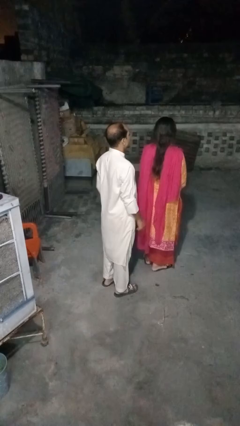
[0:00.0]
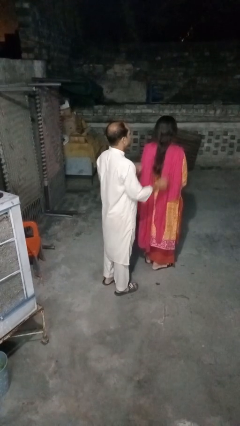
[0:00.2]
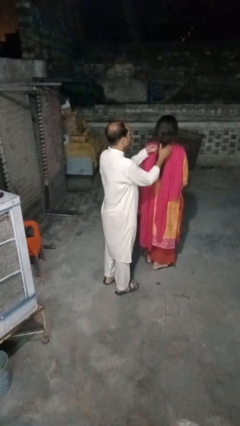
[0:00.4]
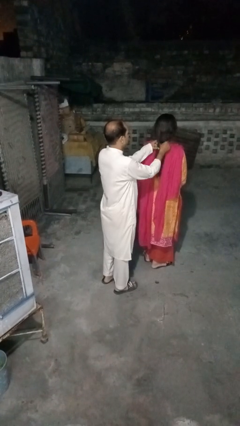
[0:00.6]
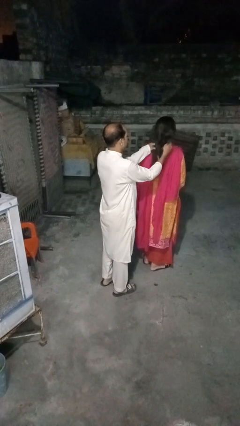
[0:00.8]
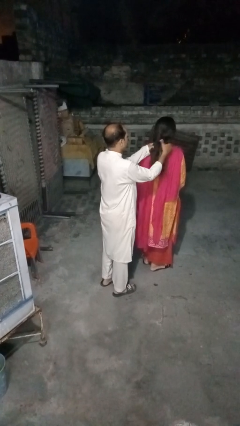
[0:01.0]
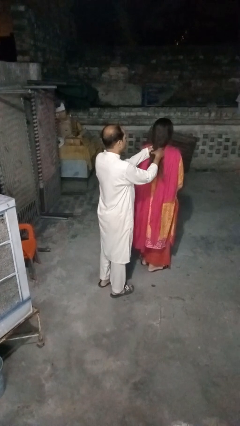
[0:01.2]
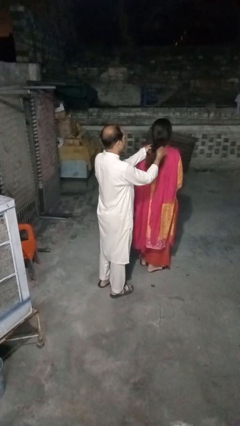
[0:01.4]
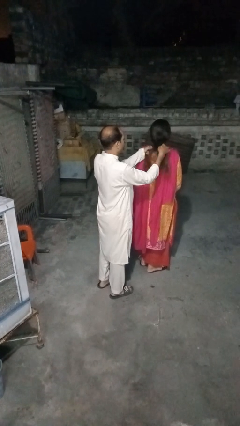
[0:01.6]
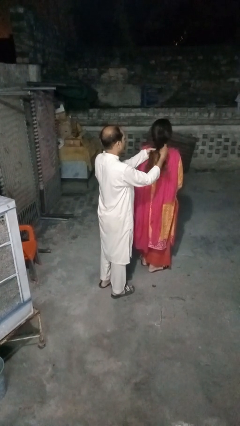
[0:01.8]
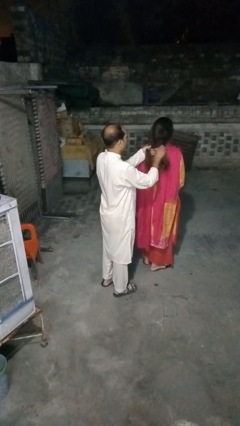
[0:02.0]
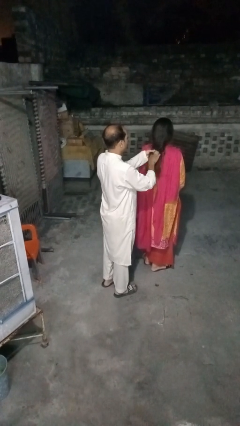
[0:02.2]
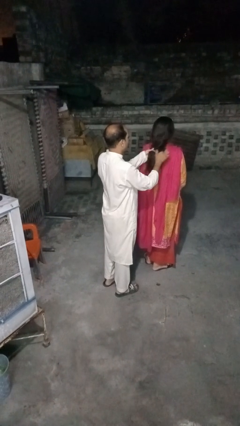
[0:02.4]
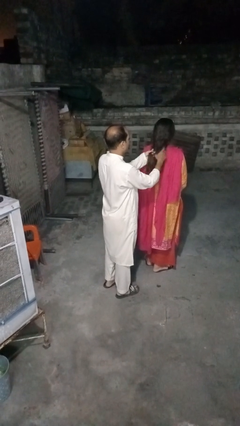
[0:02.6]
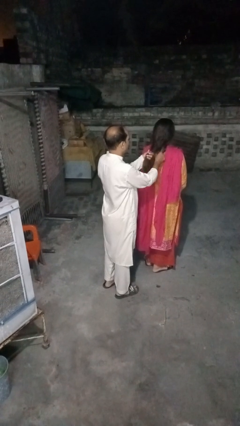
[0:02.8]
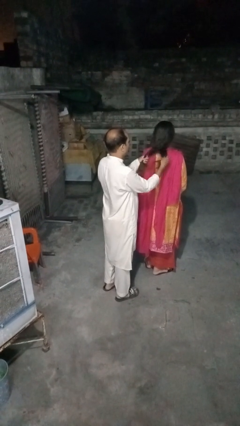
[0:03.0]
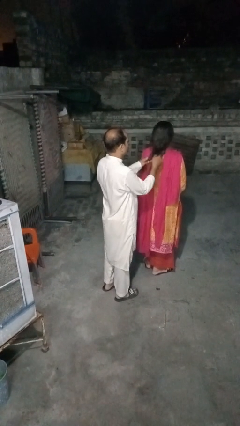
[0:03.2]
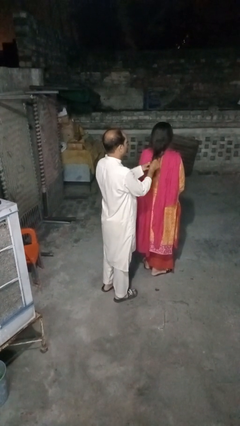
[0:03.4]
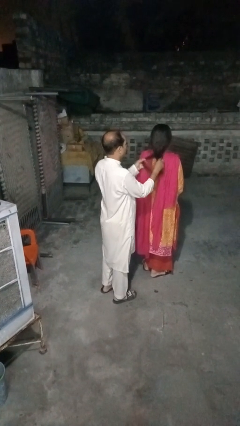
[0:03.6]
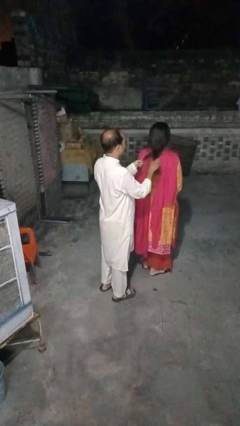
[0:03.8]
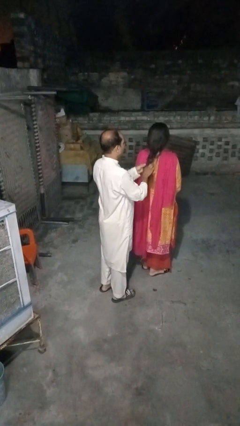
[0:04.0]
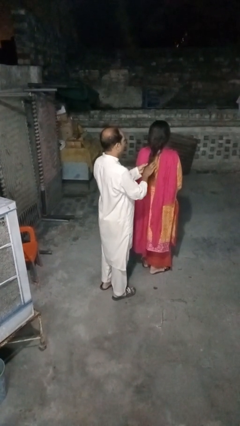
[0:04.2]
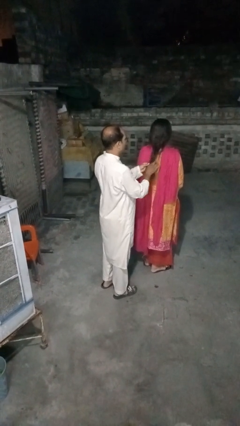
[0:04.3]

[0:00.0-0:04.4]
person braids hair of person

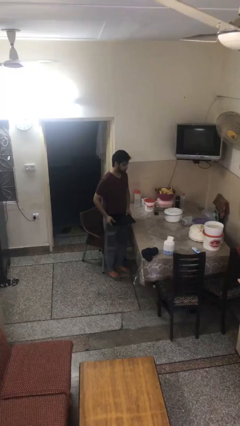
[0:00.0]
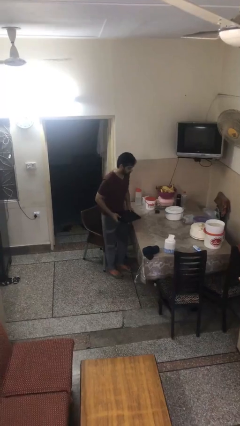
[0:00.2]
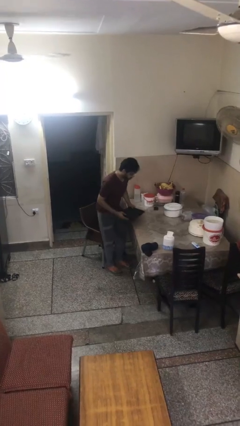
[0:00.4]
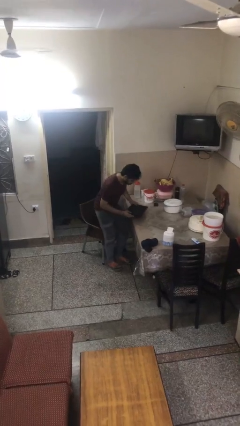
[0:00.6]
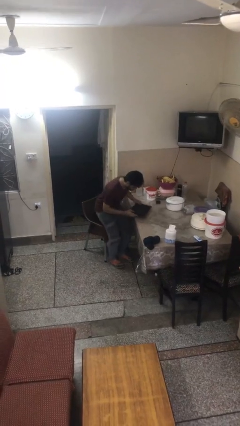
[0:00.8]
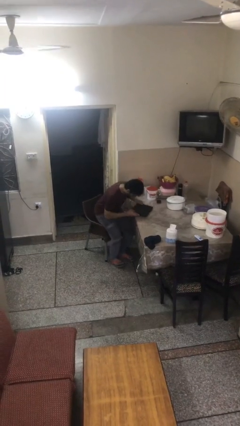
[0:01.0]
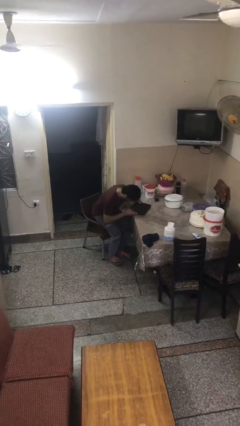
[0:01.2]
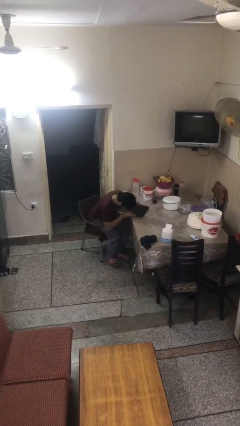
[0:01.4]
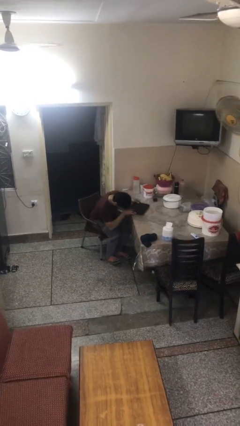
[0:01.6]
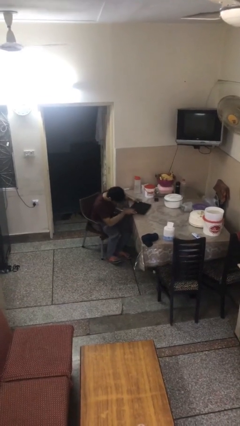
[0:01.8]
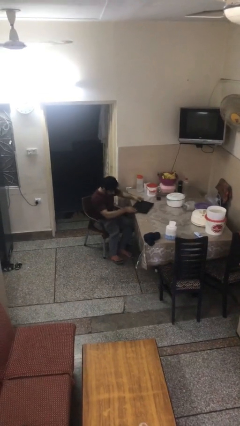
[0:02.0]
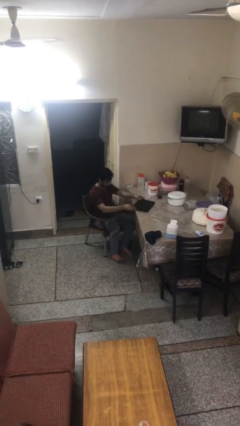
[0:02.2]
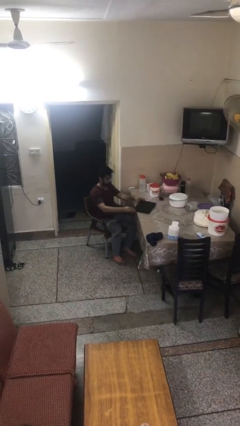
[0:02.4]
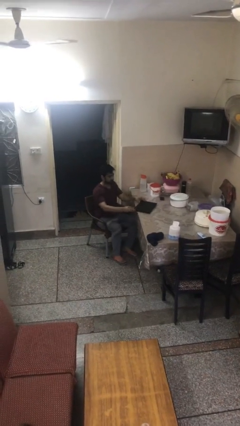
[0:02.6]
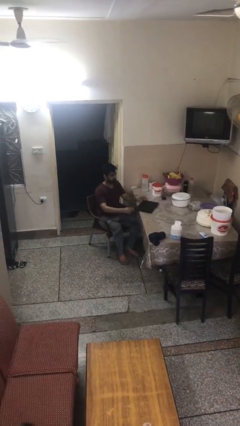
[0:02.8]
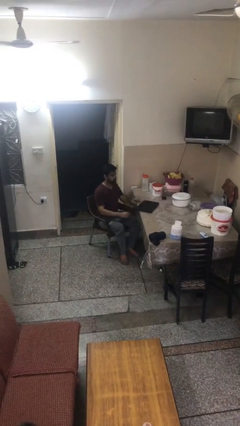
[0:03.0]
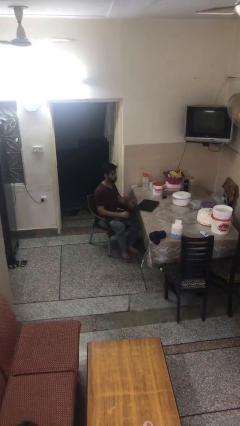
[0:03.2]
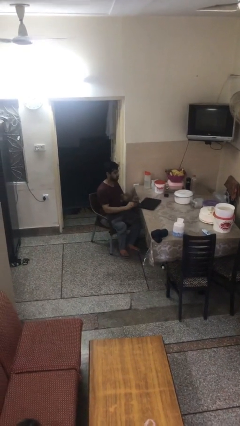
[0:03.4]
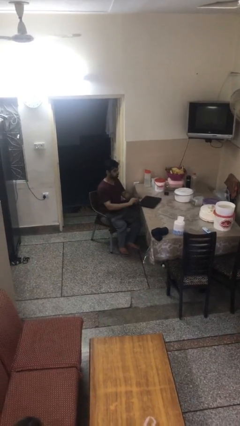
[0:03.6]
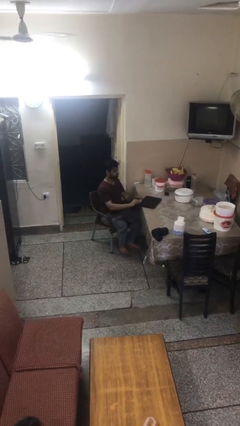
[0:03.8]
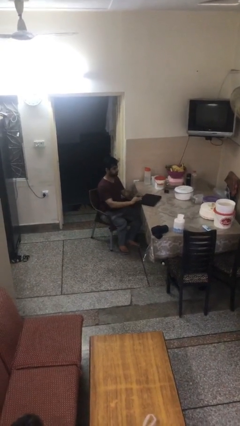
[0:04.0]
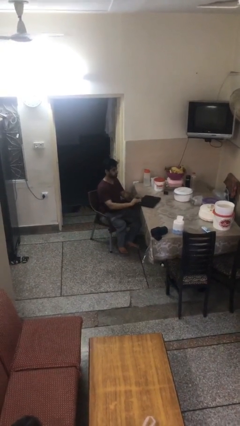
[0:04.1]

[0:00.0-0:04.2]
person sits down

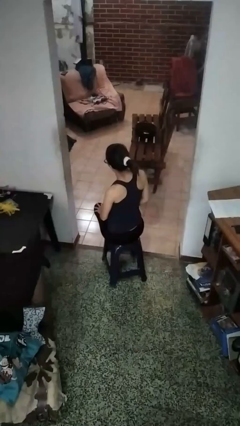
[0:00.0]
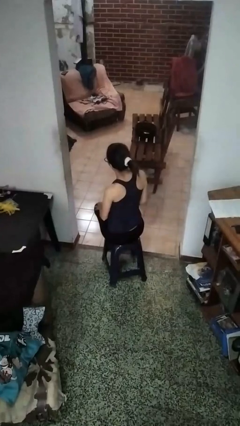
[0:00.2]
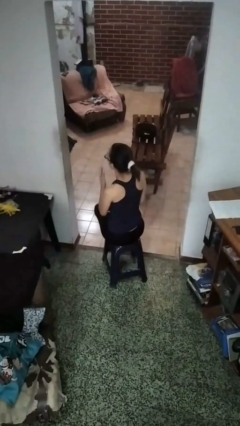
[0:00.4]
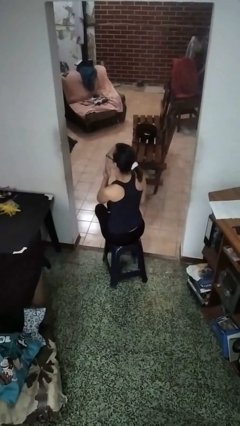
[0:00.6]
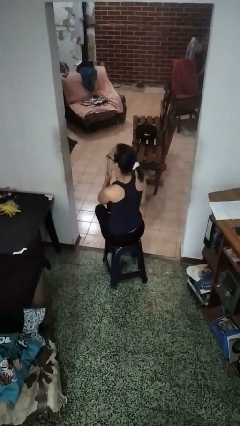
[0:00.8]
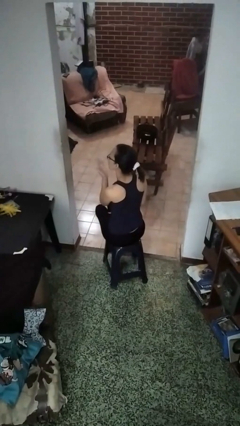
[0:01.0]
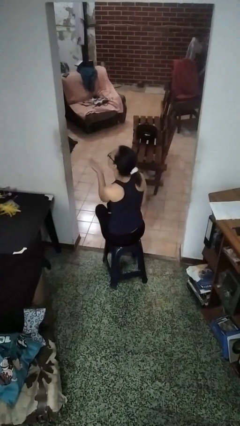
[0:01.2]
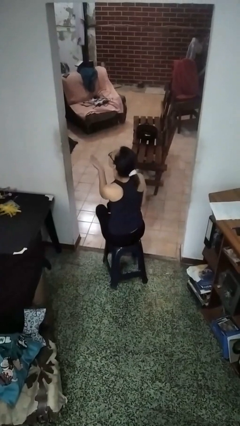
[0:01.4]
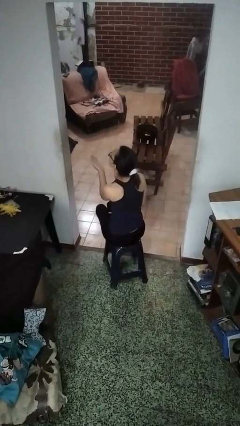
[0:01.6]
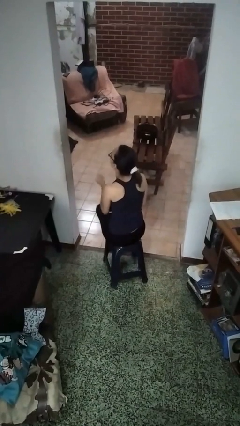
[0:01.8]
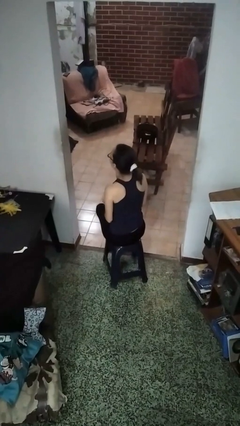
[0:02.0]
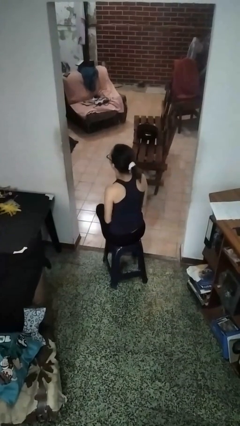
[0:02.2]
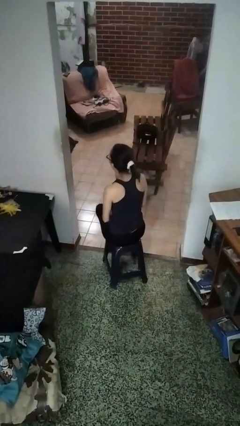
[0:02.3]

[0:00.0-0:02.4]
person gestures blow kiss

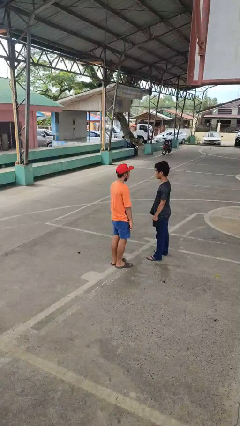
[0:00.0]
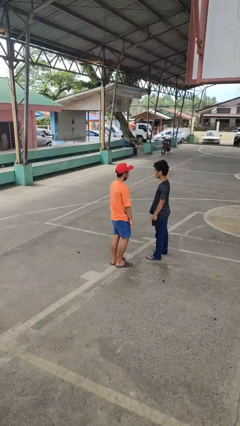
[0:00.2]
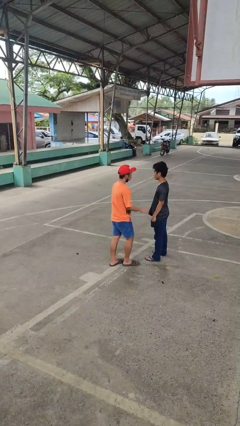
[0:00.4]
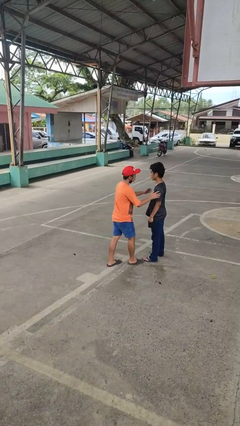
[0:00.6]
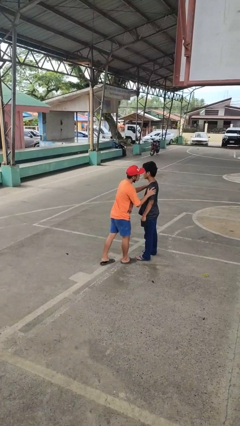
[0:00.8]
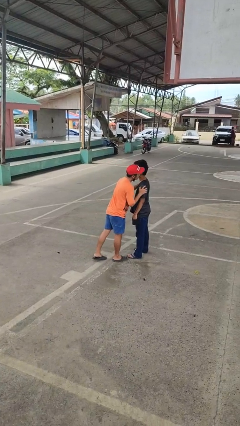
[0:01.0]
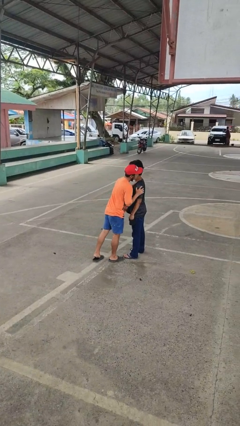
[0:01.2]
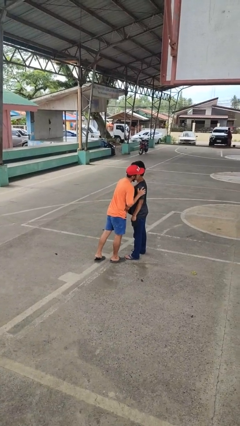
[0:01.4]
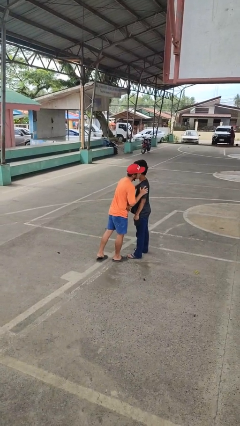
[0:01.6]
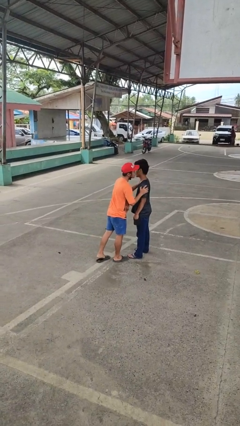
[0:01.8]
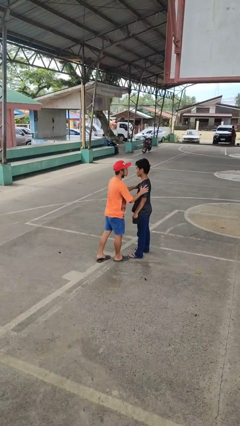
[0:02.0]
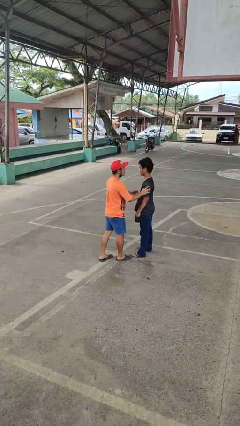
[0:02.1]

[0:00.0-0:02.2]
person kisses cheek of person

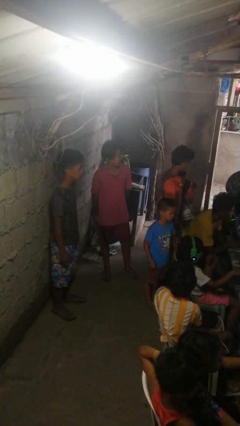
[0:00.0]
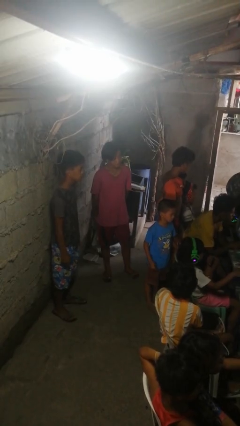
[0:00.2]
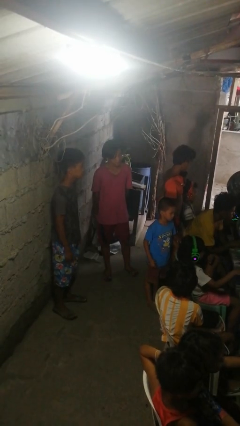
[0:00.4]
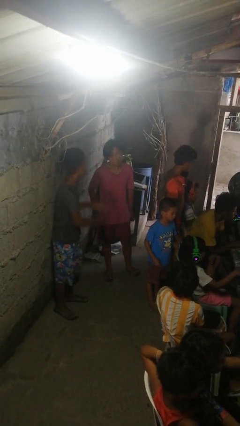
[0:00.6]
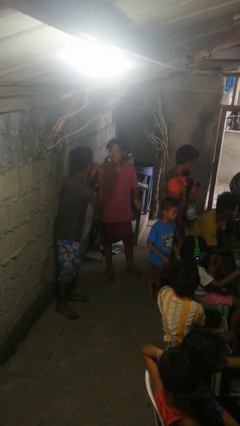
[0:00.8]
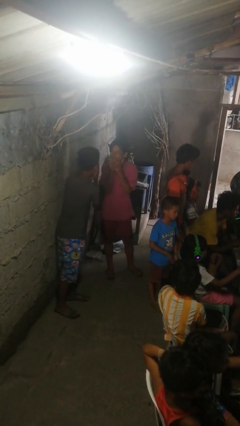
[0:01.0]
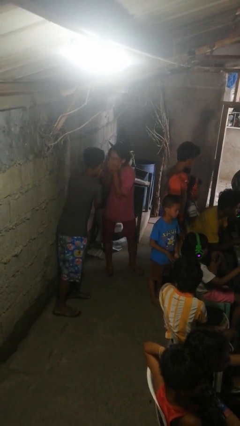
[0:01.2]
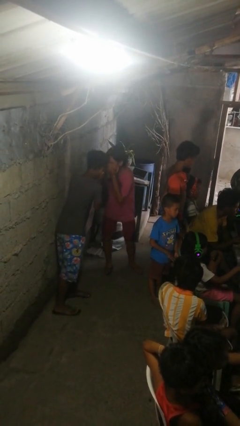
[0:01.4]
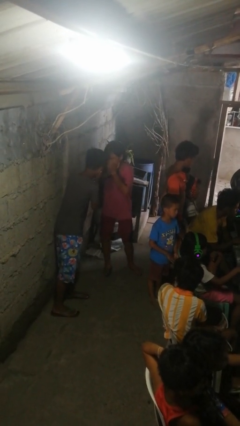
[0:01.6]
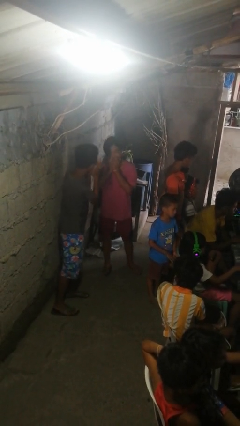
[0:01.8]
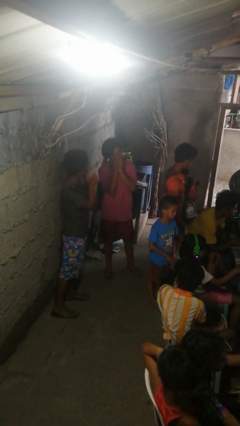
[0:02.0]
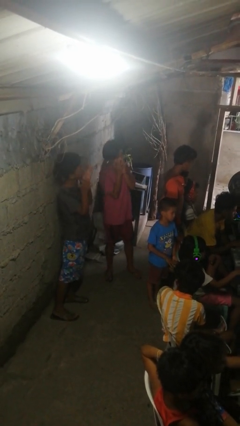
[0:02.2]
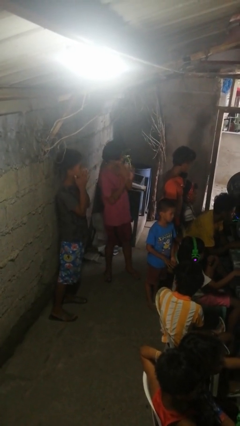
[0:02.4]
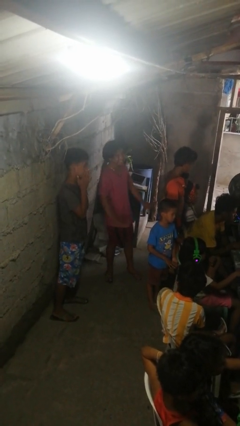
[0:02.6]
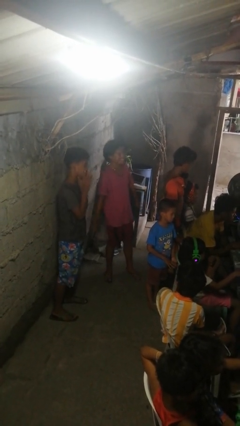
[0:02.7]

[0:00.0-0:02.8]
person laughs with person

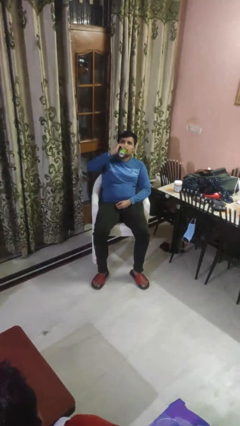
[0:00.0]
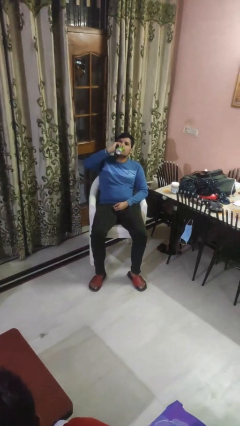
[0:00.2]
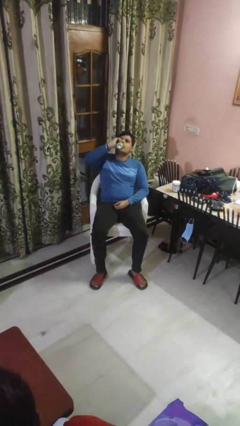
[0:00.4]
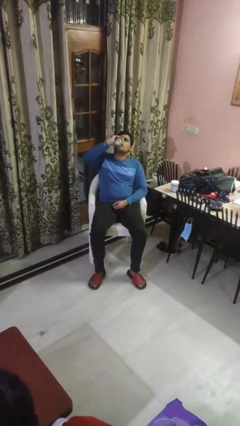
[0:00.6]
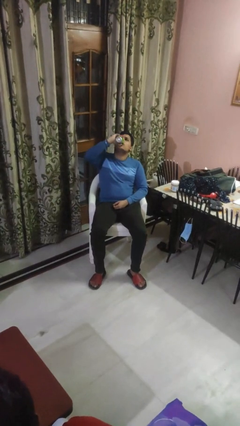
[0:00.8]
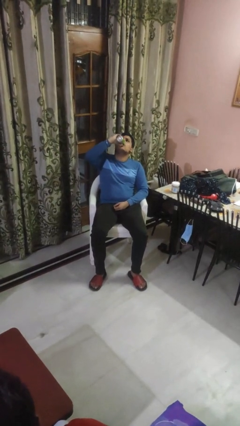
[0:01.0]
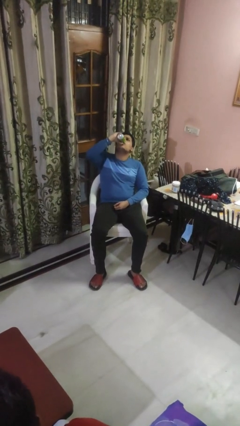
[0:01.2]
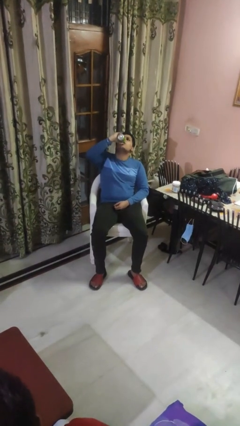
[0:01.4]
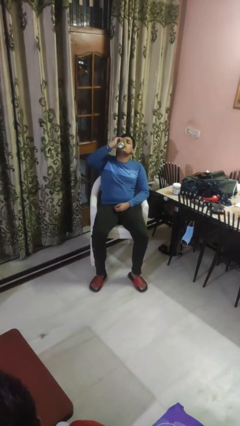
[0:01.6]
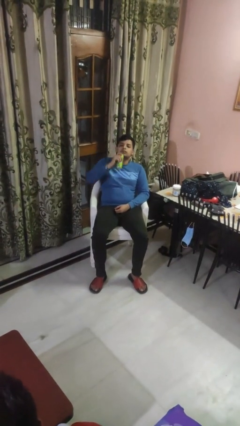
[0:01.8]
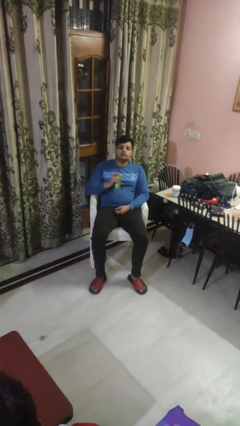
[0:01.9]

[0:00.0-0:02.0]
person drinks from beverage can
